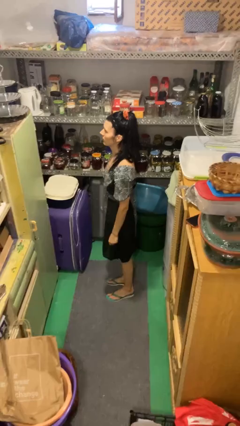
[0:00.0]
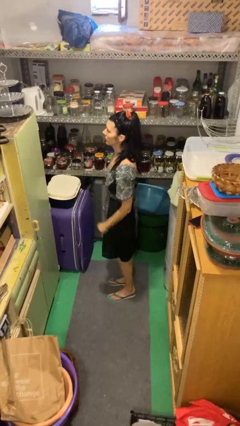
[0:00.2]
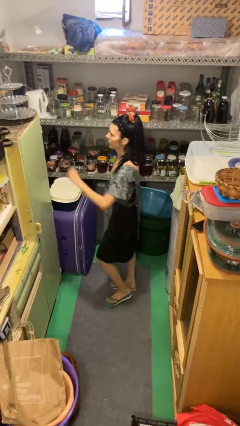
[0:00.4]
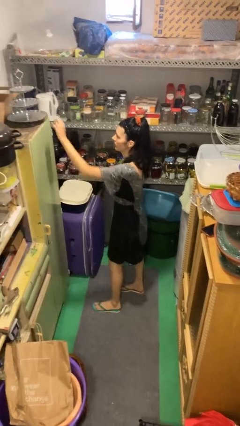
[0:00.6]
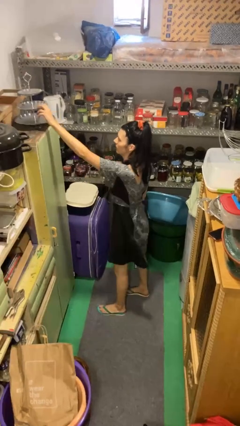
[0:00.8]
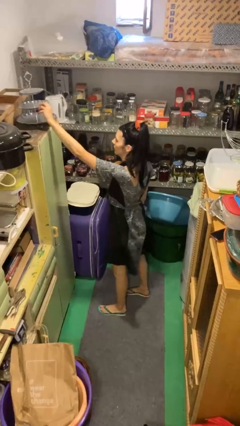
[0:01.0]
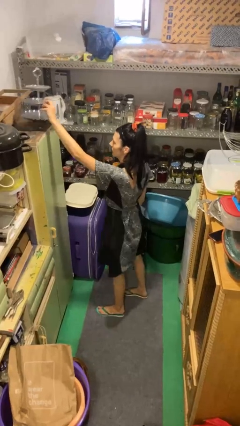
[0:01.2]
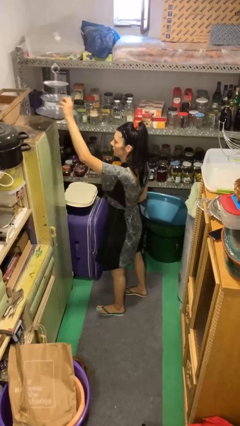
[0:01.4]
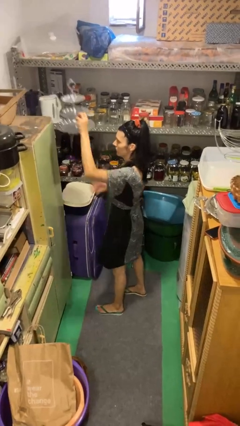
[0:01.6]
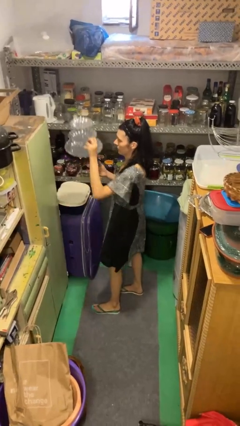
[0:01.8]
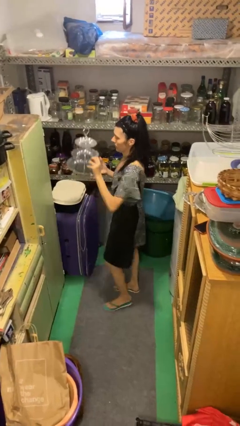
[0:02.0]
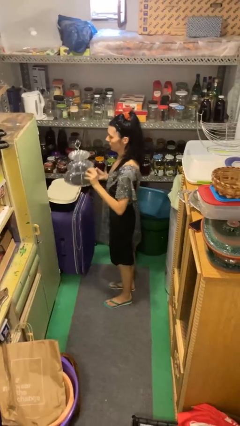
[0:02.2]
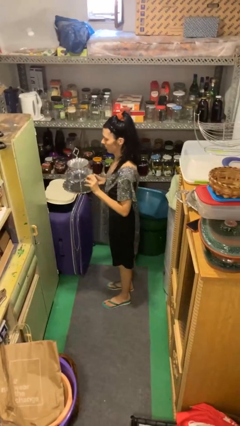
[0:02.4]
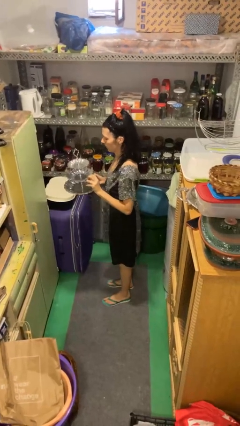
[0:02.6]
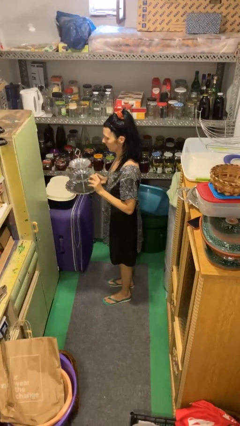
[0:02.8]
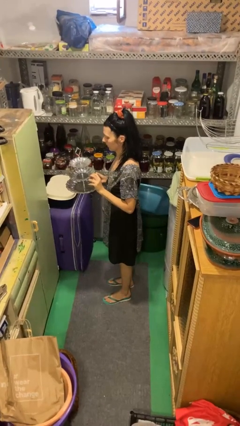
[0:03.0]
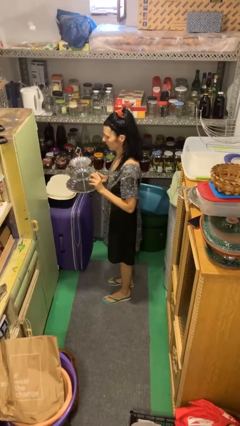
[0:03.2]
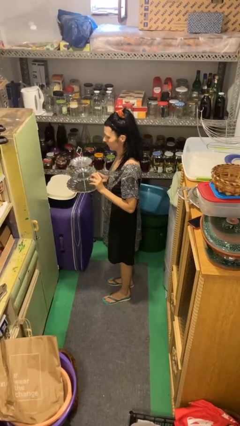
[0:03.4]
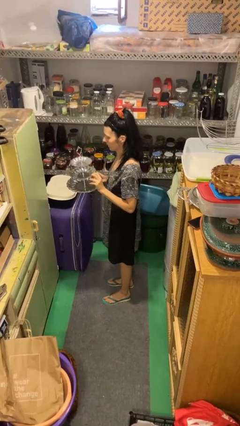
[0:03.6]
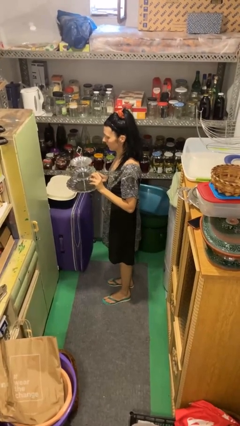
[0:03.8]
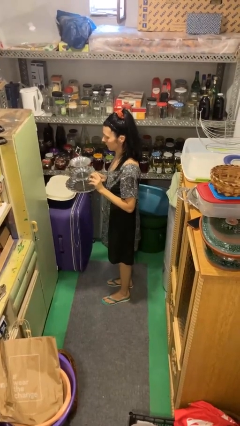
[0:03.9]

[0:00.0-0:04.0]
person picks up object from countertop

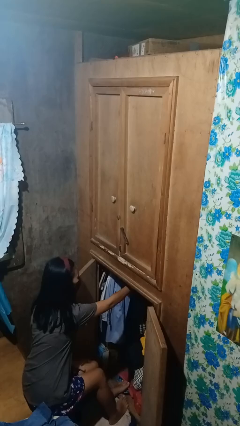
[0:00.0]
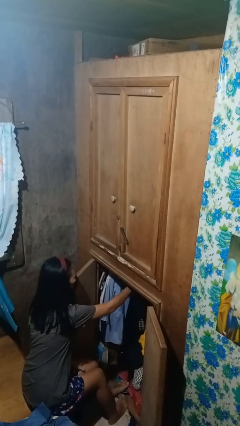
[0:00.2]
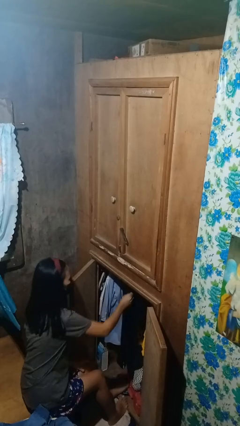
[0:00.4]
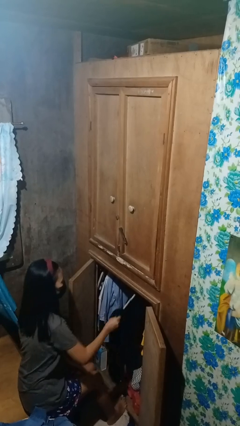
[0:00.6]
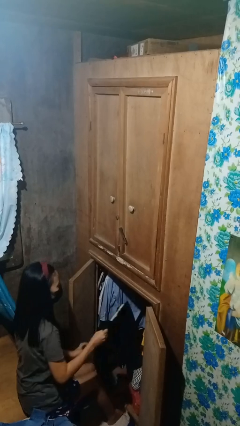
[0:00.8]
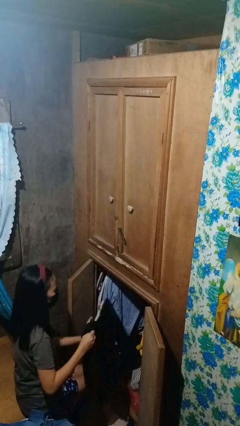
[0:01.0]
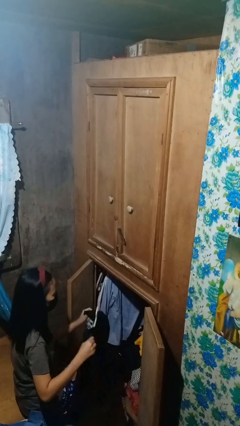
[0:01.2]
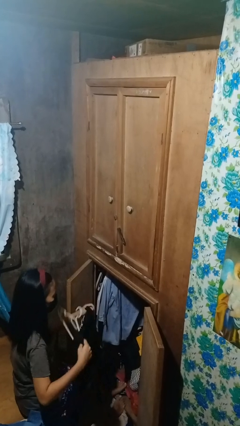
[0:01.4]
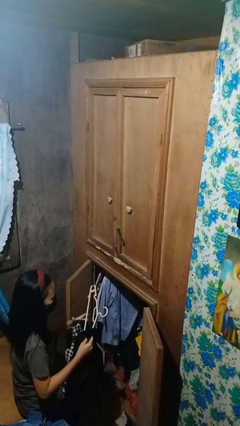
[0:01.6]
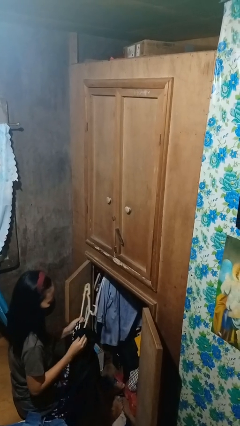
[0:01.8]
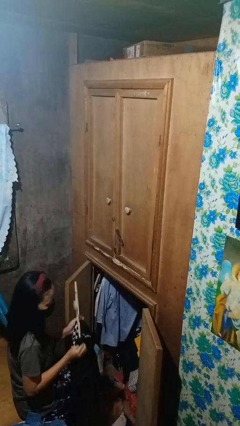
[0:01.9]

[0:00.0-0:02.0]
person takes clothes from closet

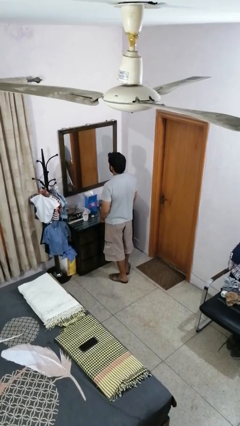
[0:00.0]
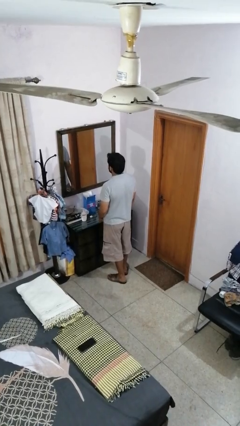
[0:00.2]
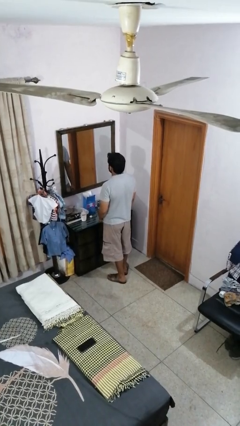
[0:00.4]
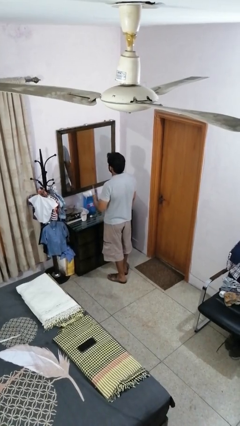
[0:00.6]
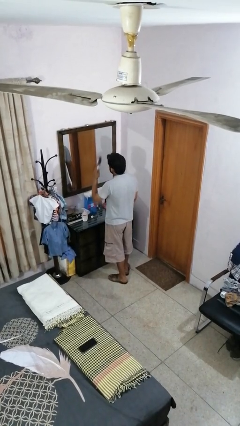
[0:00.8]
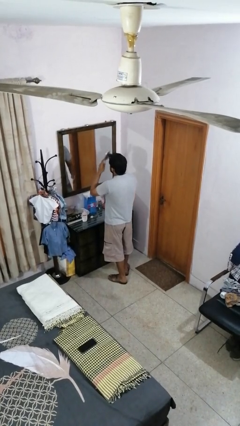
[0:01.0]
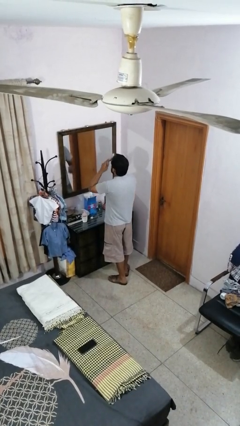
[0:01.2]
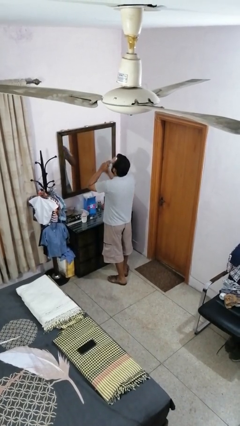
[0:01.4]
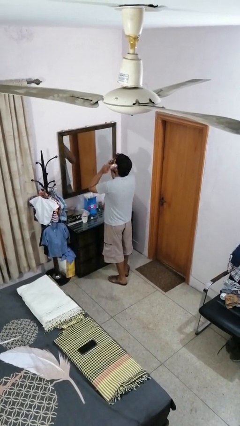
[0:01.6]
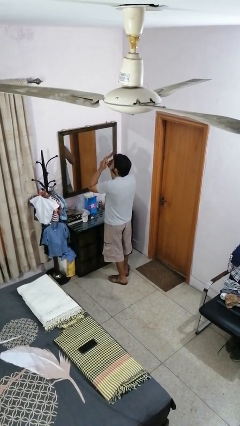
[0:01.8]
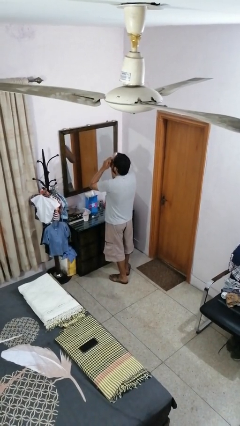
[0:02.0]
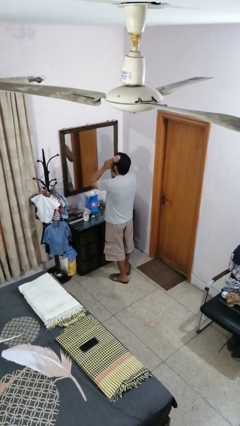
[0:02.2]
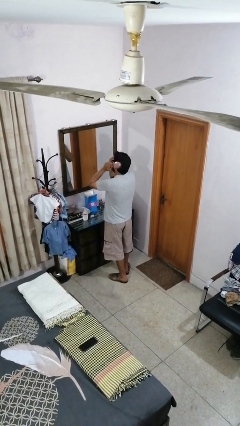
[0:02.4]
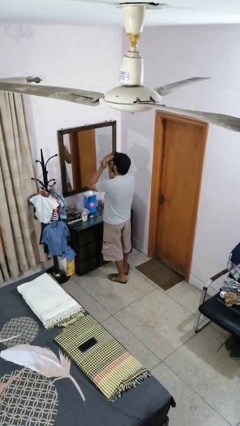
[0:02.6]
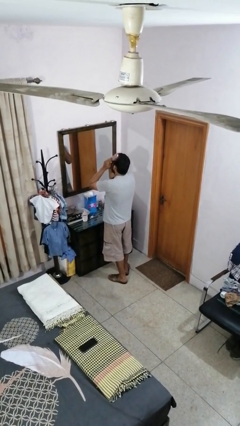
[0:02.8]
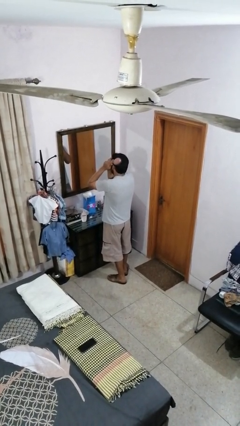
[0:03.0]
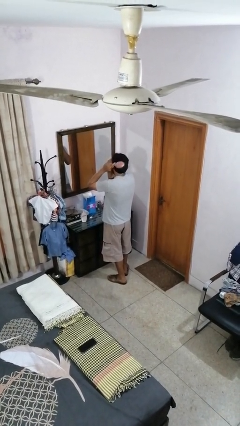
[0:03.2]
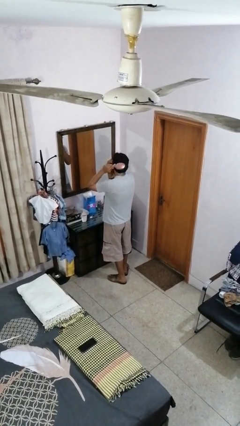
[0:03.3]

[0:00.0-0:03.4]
person brushes hair

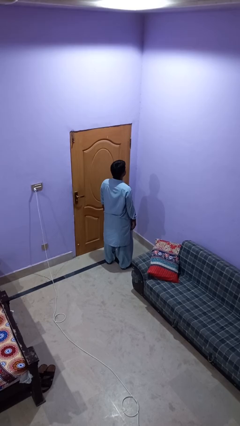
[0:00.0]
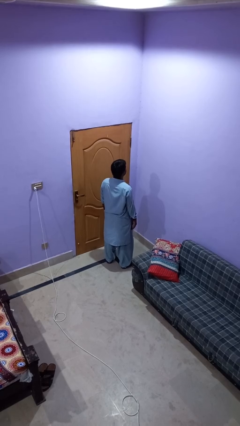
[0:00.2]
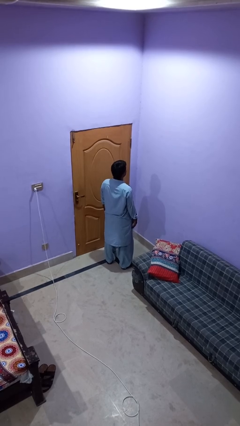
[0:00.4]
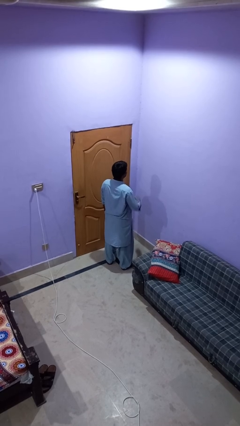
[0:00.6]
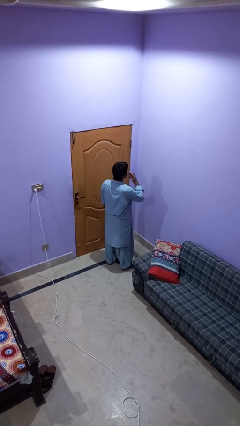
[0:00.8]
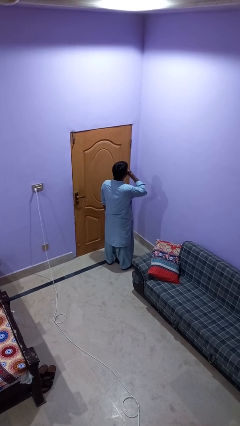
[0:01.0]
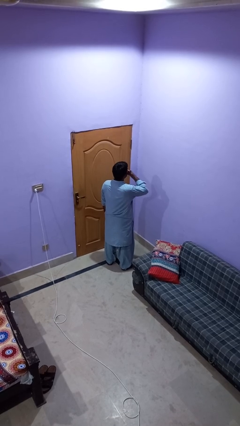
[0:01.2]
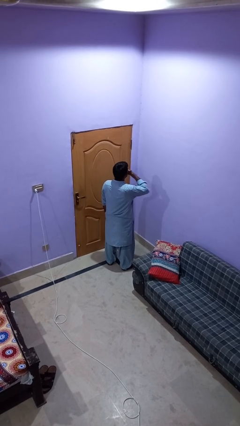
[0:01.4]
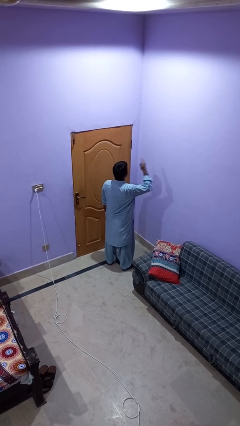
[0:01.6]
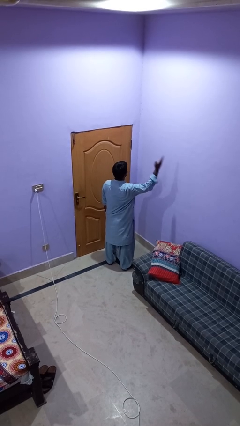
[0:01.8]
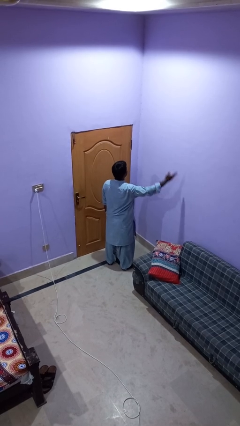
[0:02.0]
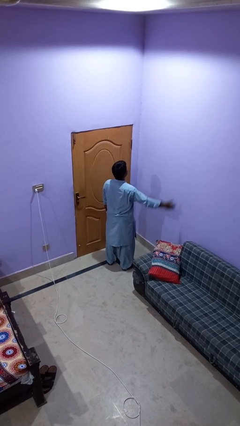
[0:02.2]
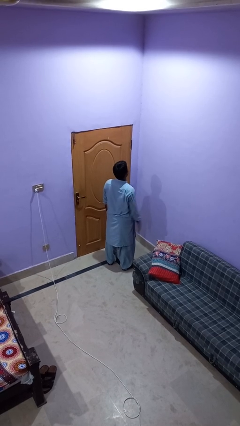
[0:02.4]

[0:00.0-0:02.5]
person gestures blow kiss

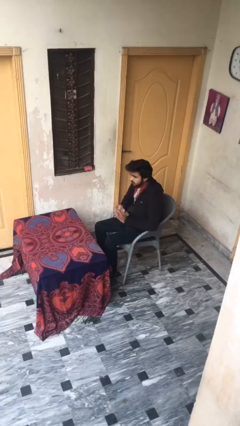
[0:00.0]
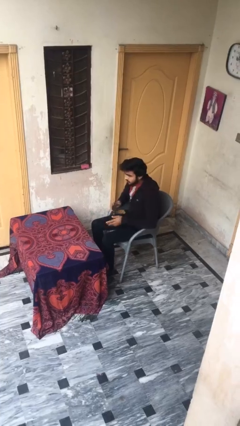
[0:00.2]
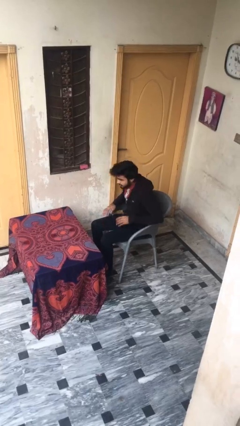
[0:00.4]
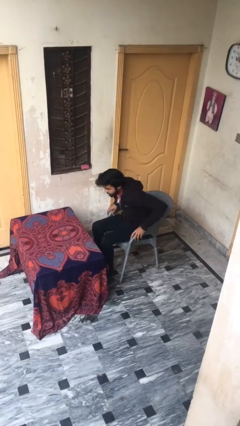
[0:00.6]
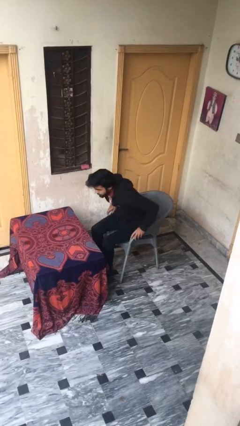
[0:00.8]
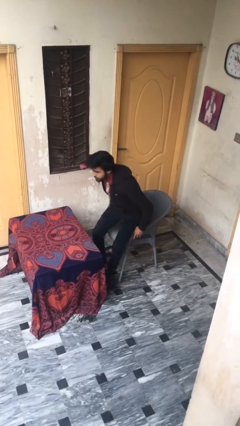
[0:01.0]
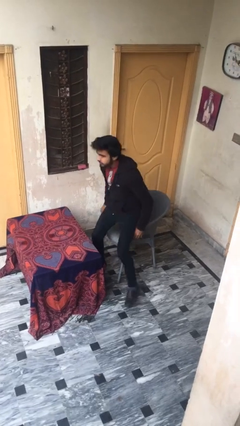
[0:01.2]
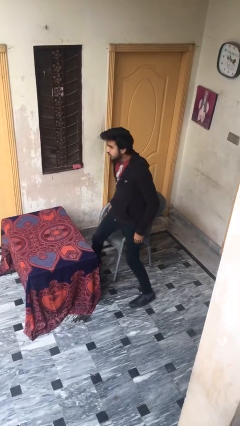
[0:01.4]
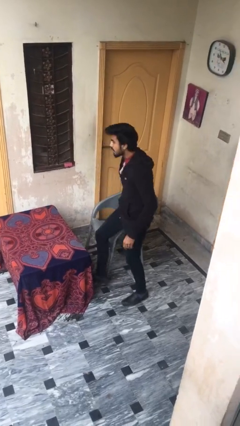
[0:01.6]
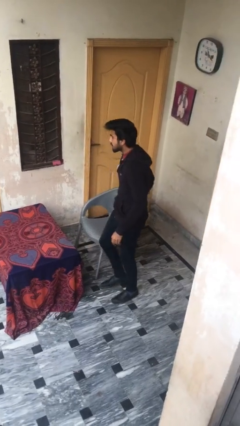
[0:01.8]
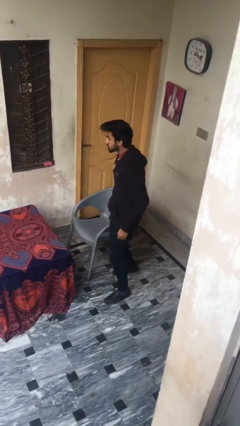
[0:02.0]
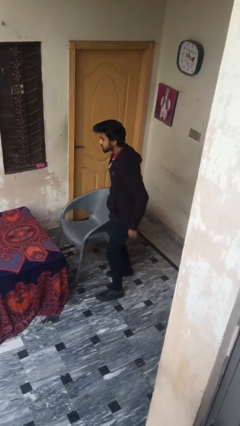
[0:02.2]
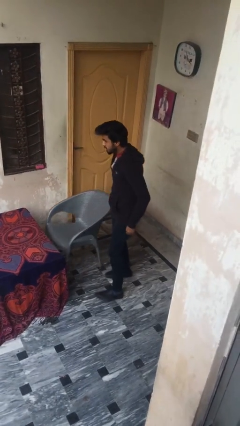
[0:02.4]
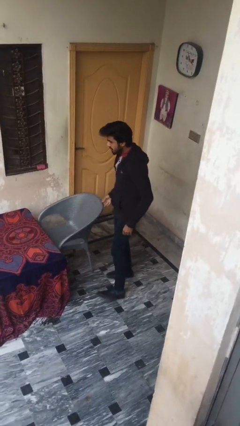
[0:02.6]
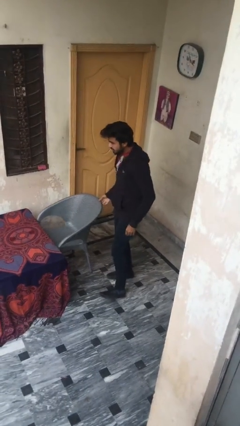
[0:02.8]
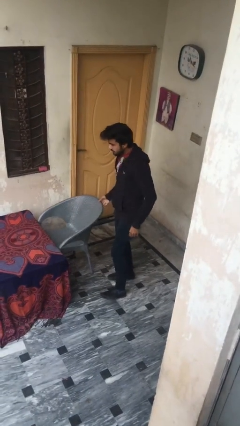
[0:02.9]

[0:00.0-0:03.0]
person stands up

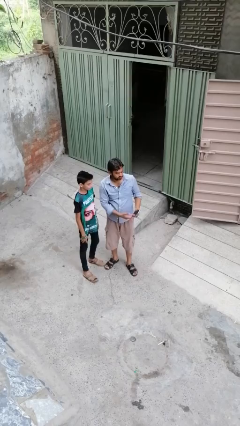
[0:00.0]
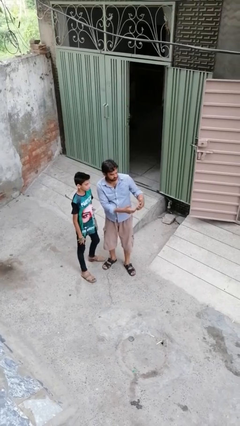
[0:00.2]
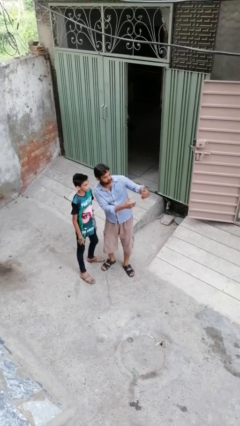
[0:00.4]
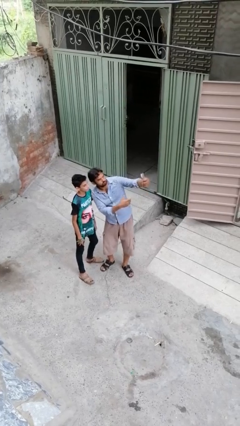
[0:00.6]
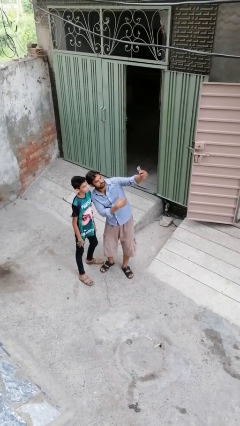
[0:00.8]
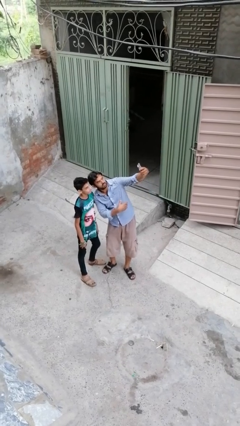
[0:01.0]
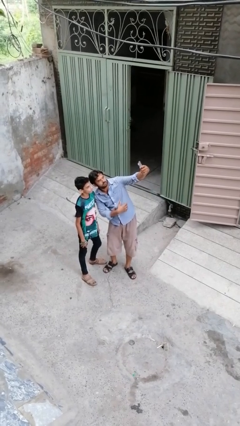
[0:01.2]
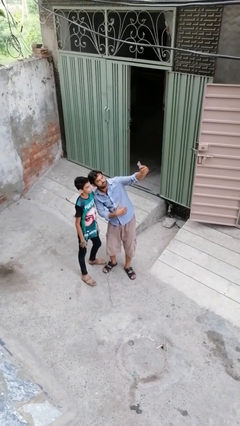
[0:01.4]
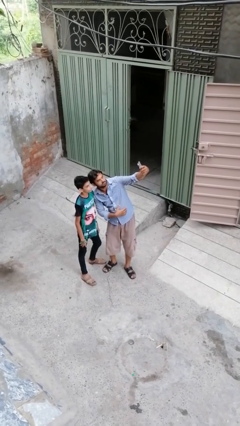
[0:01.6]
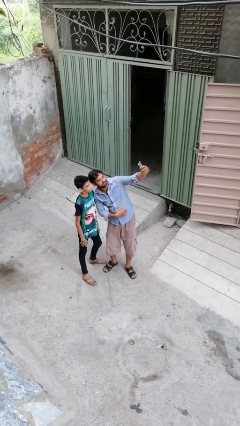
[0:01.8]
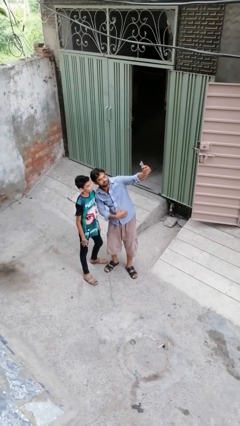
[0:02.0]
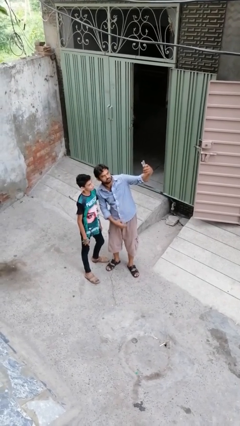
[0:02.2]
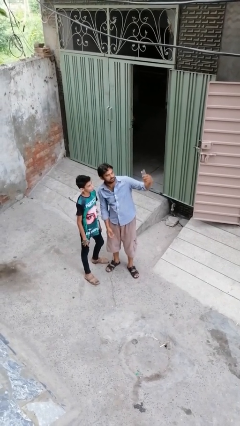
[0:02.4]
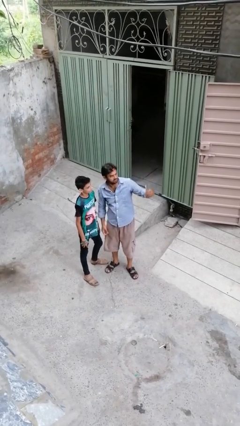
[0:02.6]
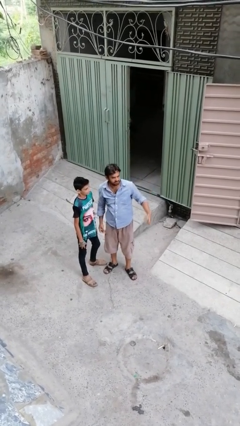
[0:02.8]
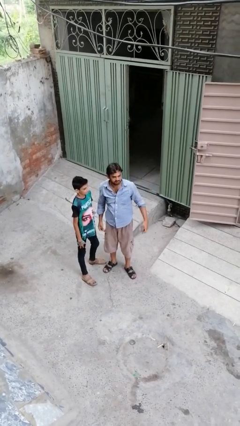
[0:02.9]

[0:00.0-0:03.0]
person takes selfie with person
